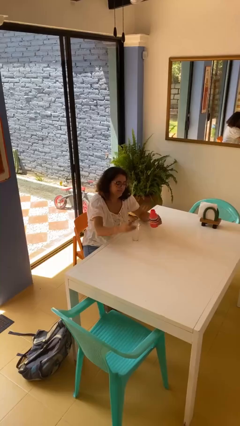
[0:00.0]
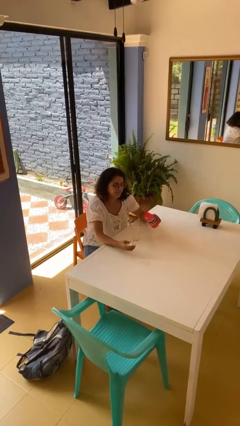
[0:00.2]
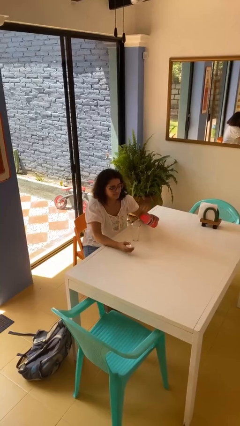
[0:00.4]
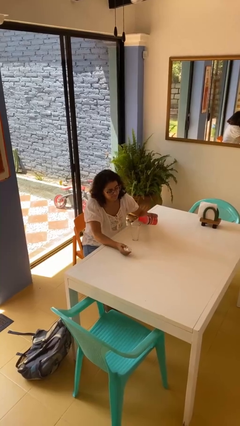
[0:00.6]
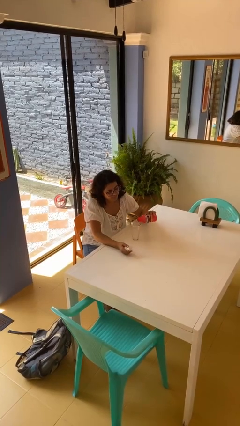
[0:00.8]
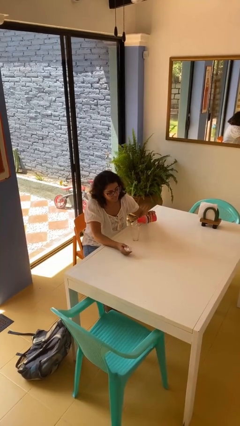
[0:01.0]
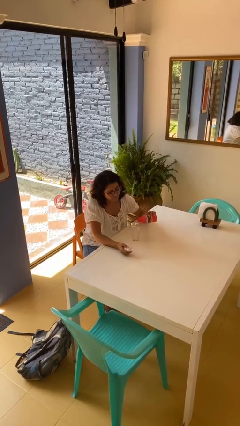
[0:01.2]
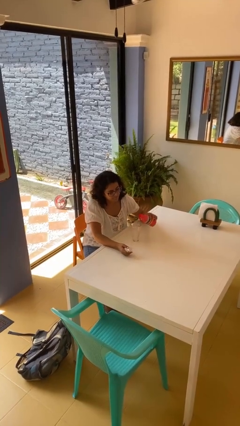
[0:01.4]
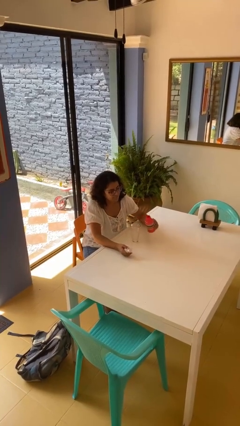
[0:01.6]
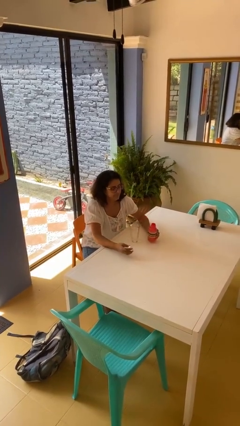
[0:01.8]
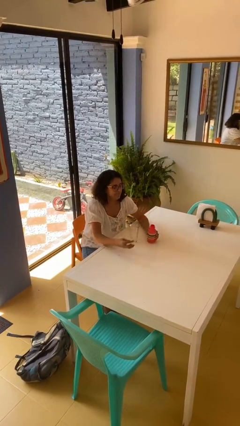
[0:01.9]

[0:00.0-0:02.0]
person pours liquid into cup

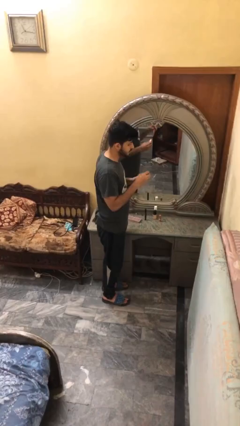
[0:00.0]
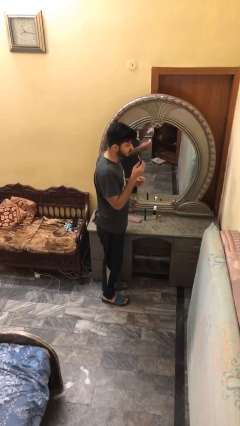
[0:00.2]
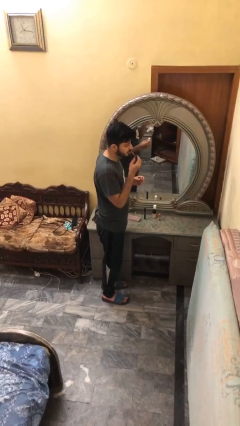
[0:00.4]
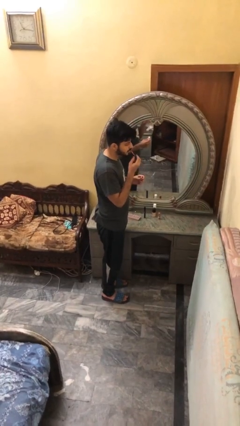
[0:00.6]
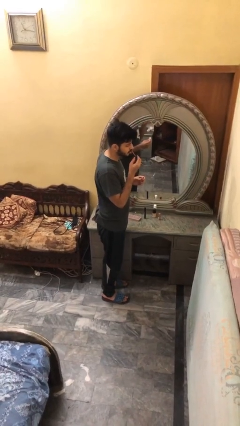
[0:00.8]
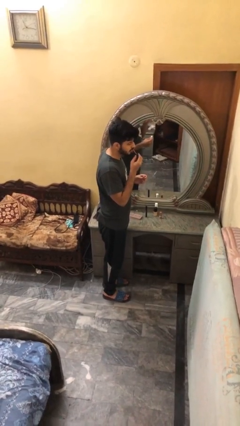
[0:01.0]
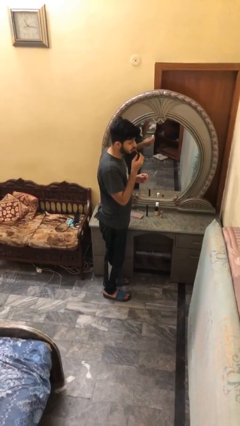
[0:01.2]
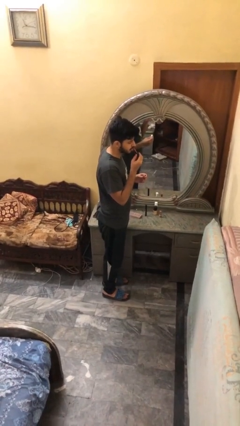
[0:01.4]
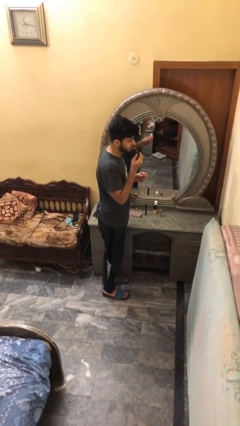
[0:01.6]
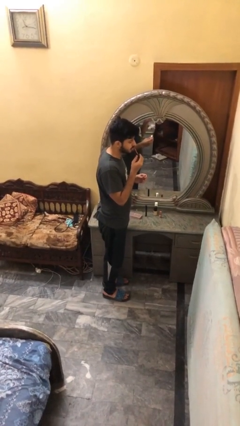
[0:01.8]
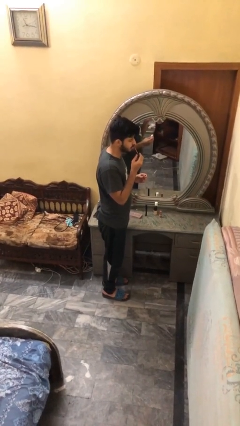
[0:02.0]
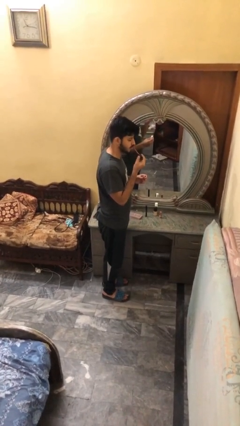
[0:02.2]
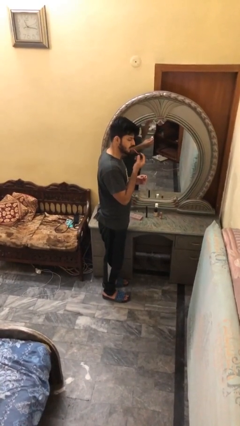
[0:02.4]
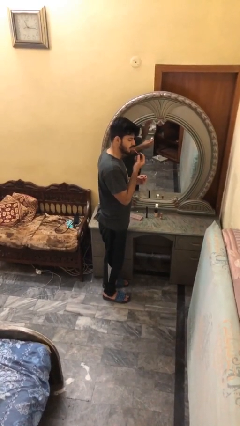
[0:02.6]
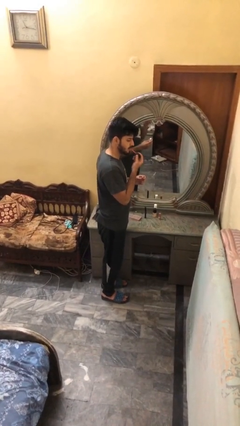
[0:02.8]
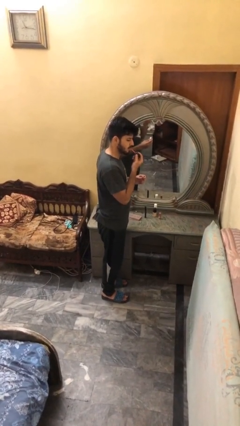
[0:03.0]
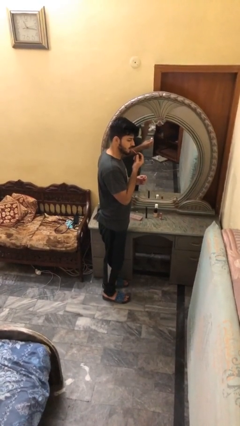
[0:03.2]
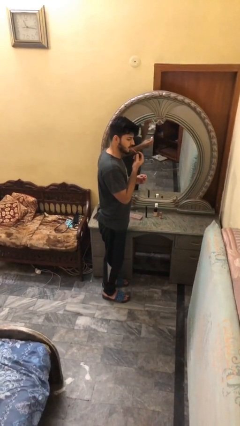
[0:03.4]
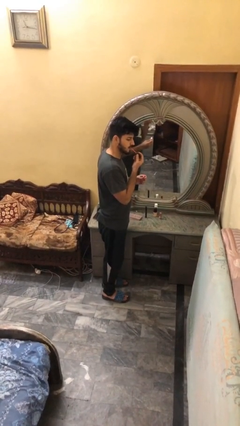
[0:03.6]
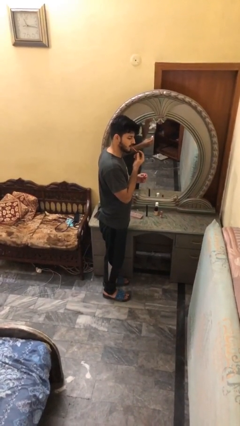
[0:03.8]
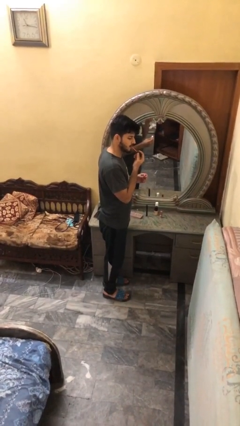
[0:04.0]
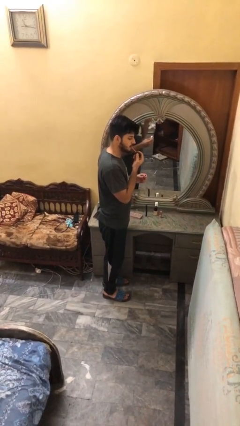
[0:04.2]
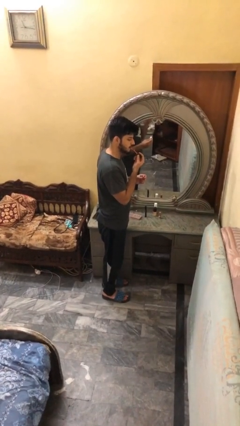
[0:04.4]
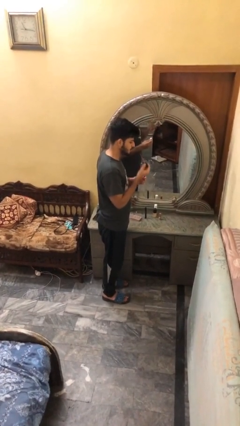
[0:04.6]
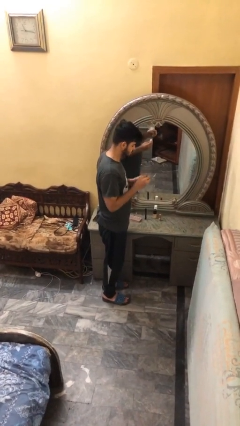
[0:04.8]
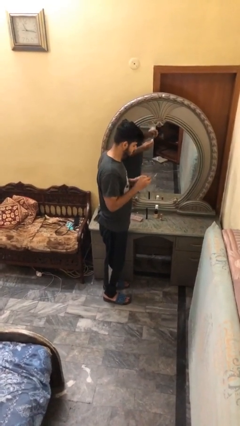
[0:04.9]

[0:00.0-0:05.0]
person applies lip makeup

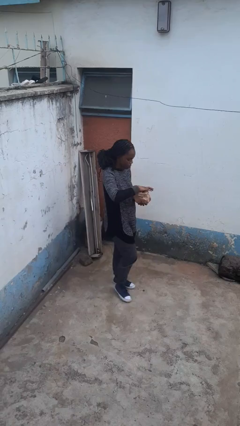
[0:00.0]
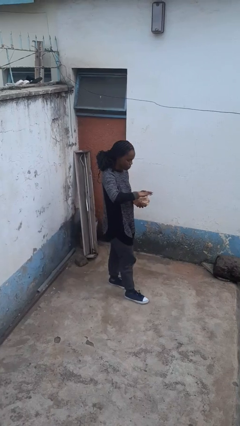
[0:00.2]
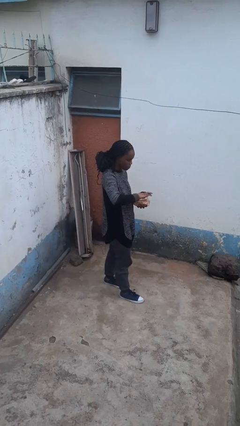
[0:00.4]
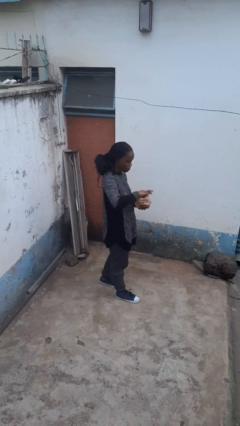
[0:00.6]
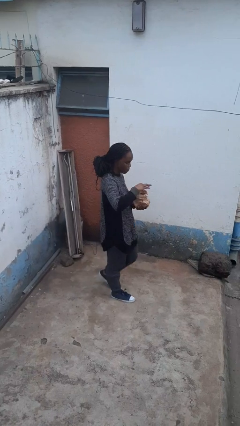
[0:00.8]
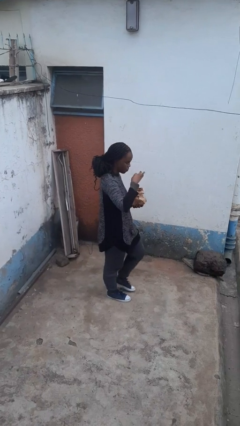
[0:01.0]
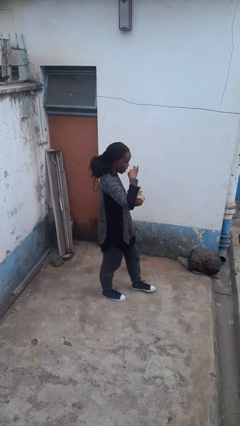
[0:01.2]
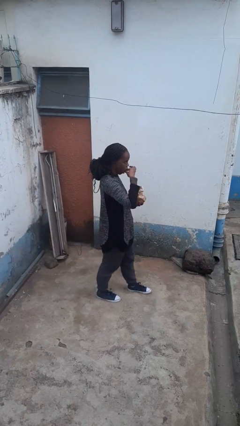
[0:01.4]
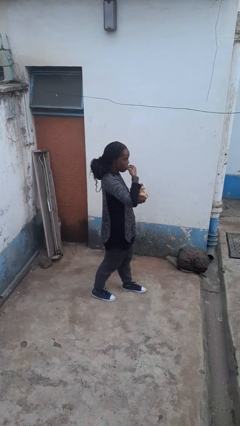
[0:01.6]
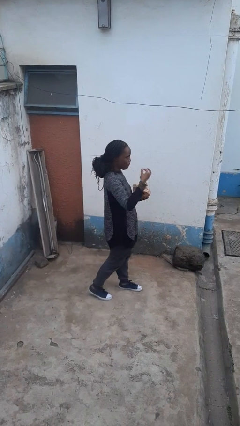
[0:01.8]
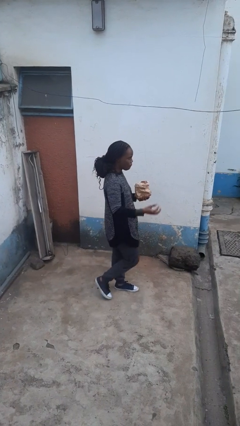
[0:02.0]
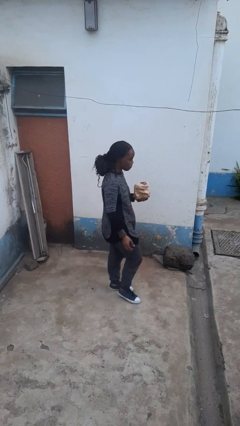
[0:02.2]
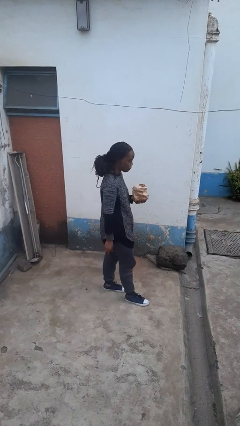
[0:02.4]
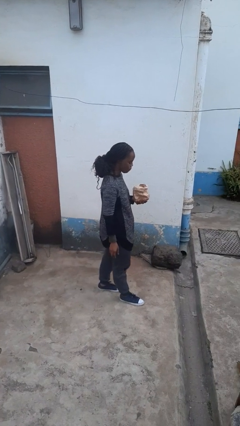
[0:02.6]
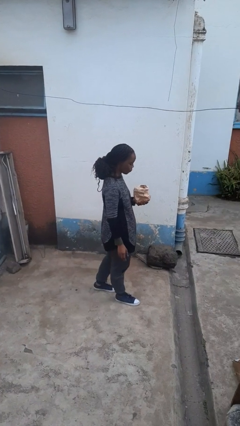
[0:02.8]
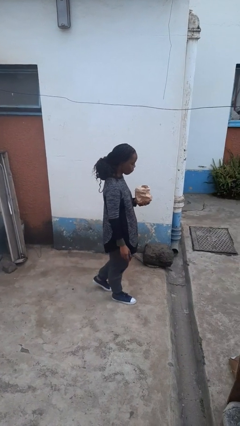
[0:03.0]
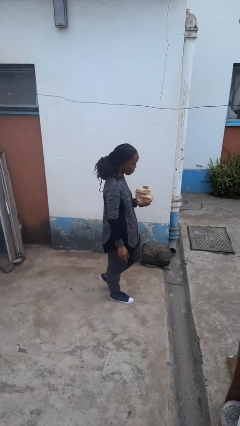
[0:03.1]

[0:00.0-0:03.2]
person eats snack from bag

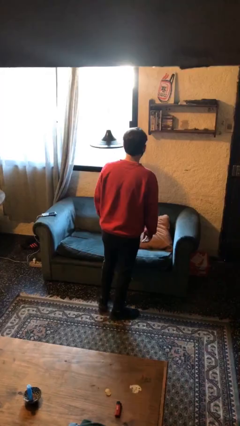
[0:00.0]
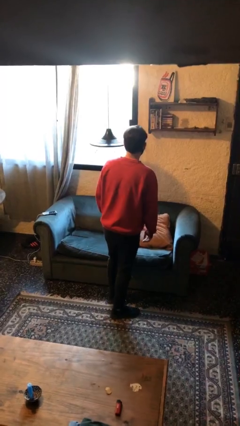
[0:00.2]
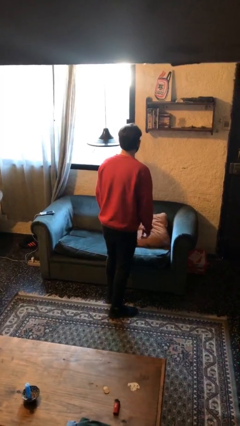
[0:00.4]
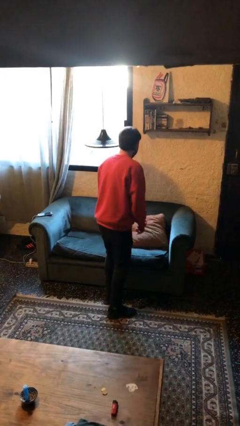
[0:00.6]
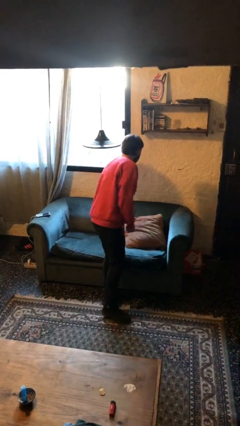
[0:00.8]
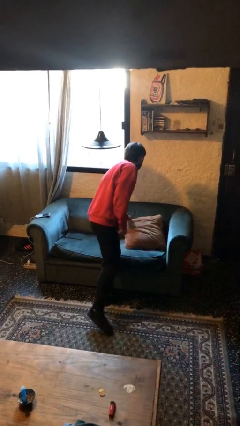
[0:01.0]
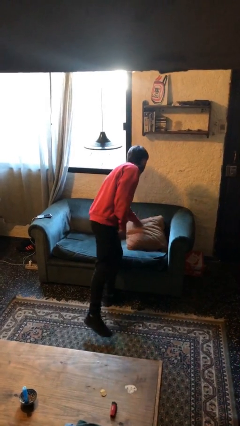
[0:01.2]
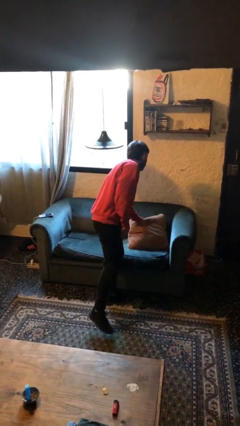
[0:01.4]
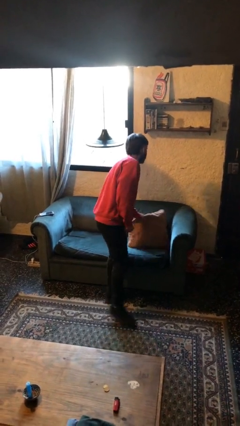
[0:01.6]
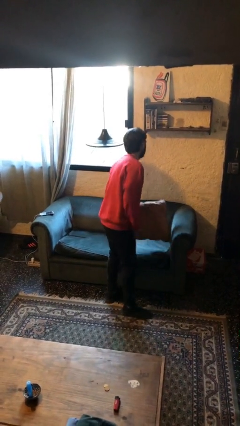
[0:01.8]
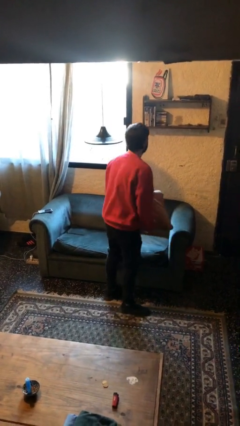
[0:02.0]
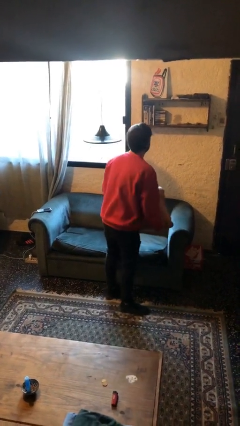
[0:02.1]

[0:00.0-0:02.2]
person picks up object from couch

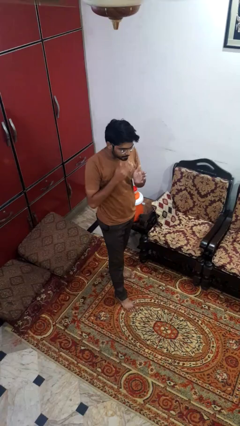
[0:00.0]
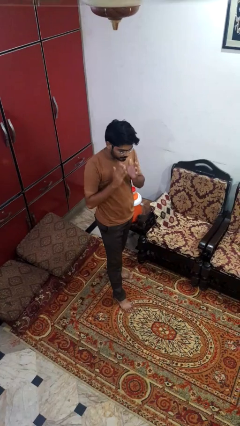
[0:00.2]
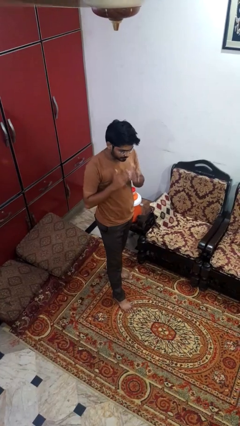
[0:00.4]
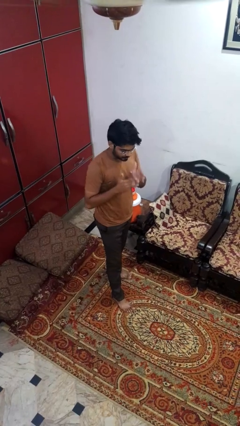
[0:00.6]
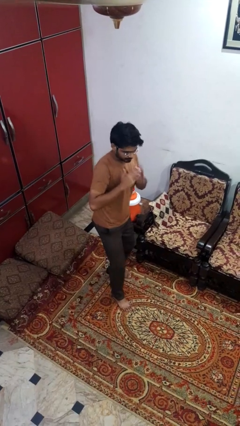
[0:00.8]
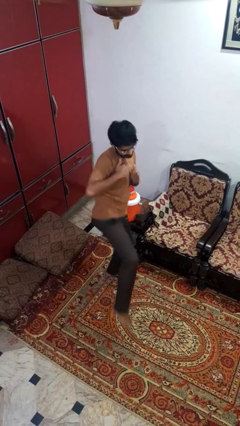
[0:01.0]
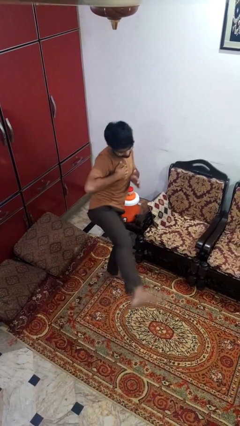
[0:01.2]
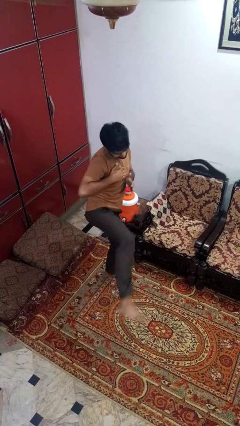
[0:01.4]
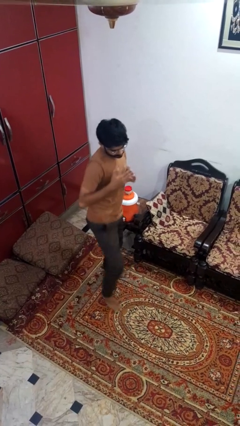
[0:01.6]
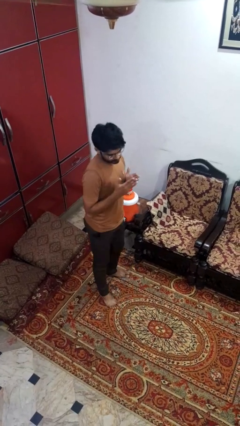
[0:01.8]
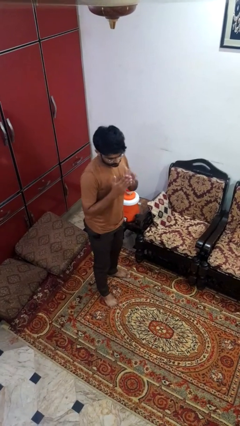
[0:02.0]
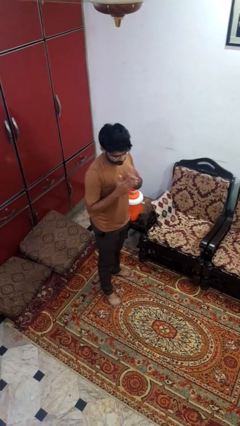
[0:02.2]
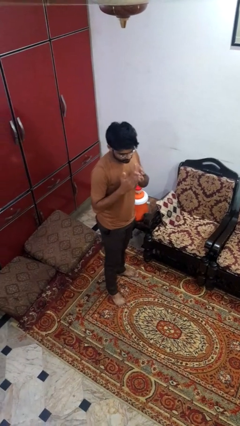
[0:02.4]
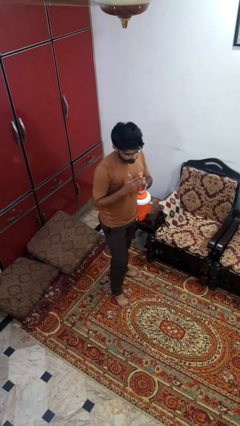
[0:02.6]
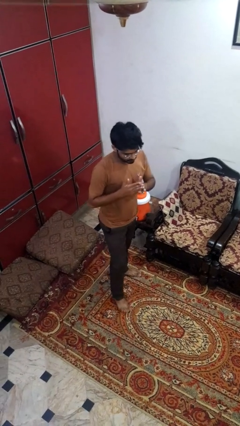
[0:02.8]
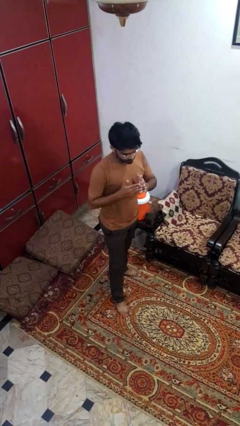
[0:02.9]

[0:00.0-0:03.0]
person karate kicks

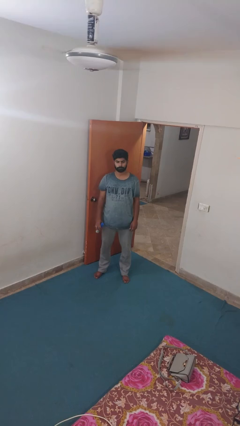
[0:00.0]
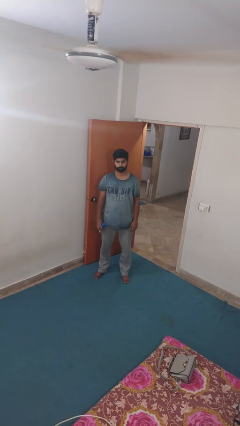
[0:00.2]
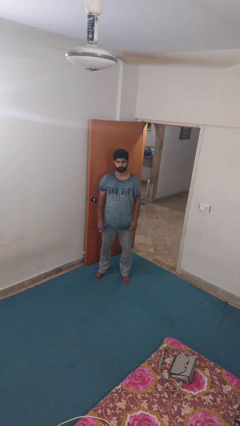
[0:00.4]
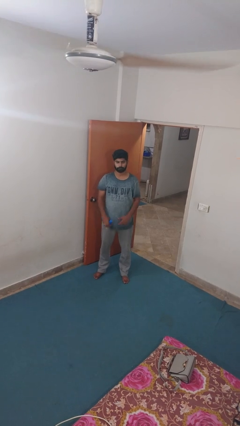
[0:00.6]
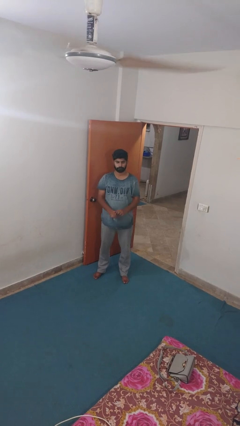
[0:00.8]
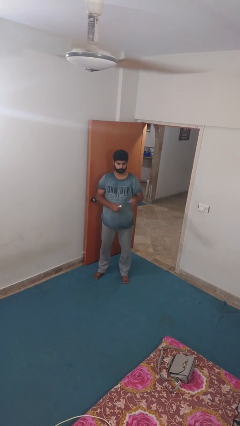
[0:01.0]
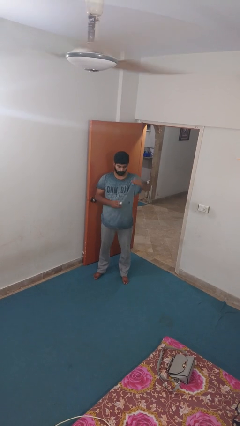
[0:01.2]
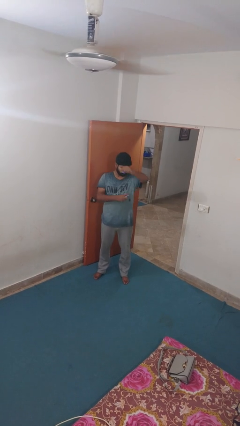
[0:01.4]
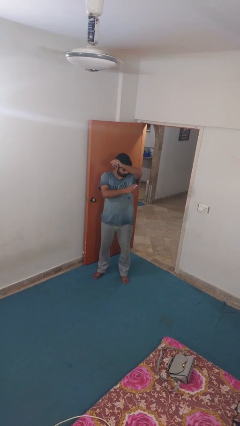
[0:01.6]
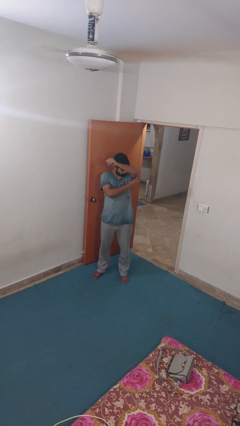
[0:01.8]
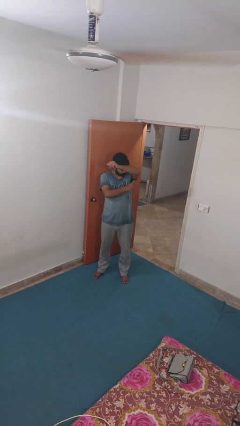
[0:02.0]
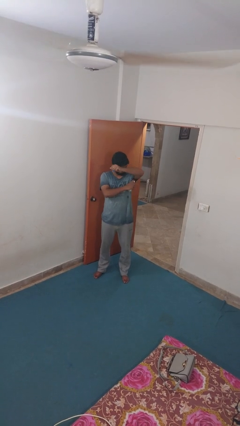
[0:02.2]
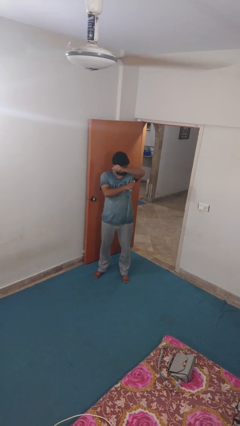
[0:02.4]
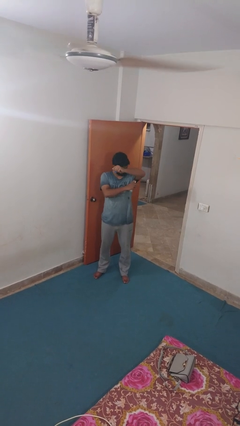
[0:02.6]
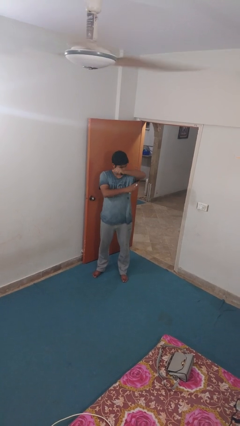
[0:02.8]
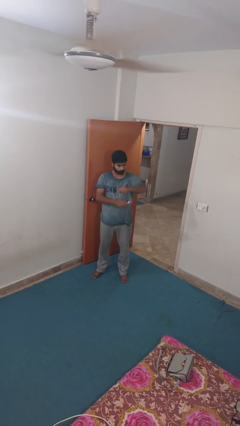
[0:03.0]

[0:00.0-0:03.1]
person applies deodorant
